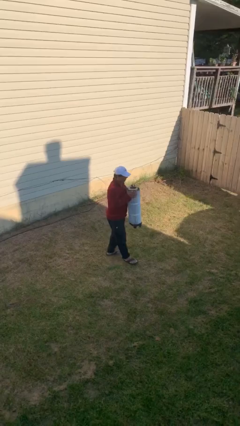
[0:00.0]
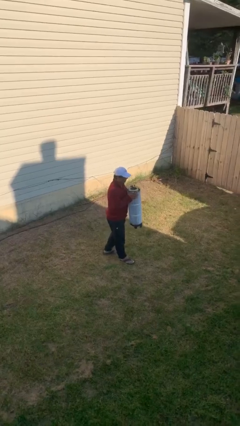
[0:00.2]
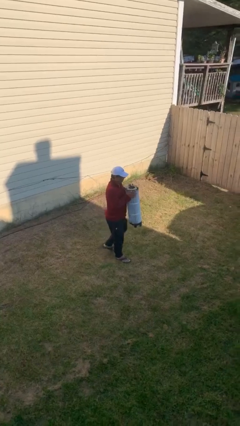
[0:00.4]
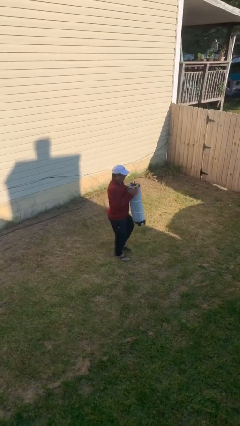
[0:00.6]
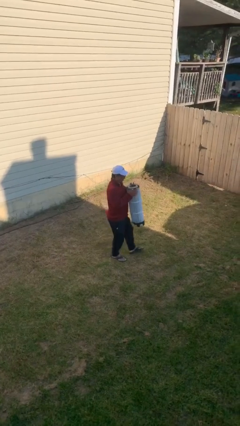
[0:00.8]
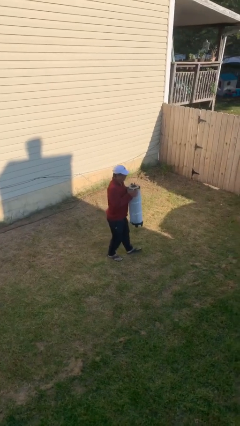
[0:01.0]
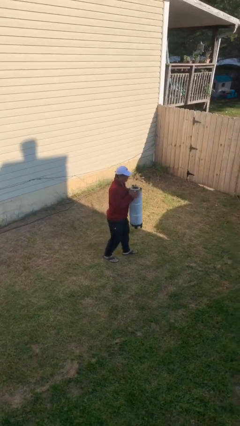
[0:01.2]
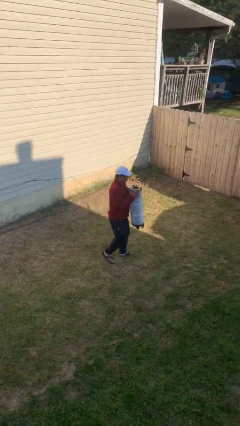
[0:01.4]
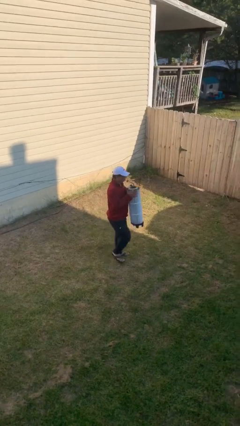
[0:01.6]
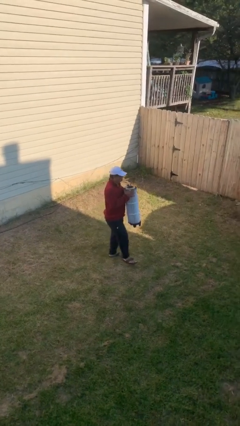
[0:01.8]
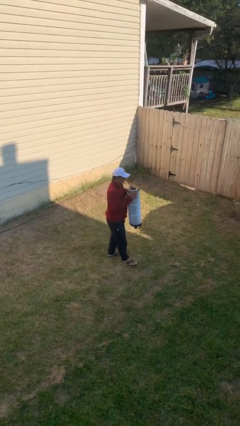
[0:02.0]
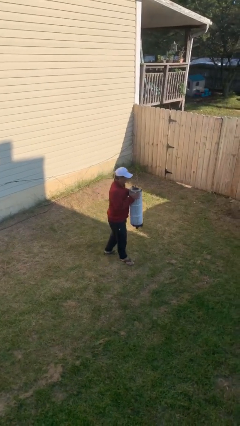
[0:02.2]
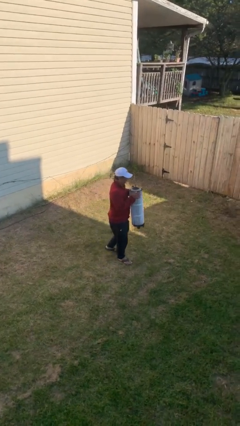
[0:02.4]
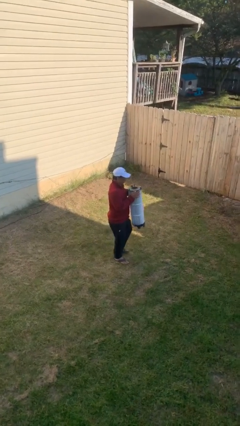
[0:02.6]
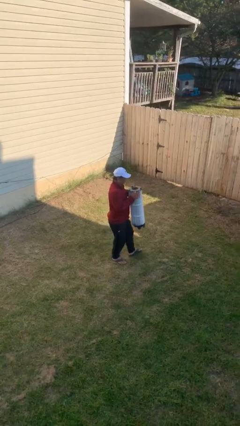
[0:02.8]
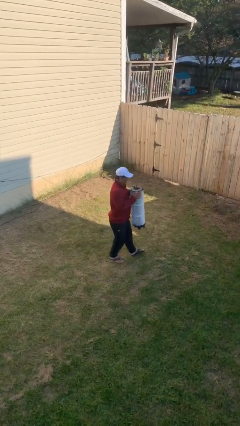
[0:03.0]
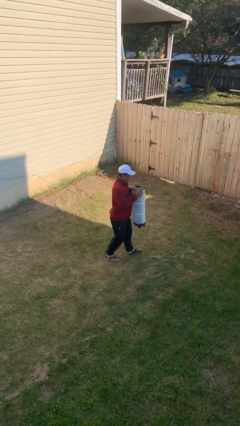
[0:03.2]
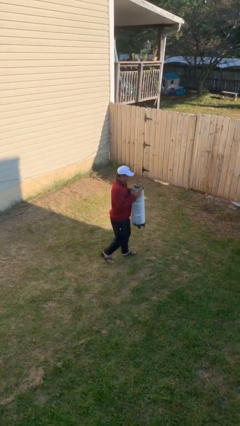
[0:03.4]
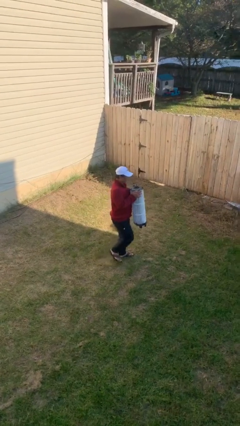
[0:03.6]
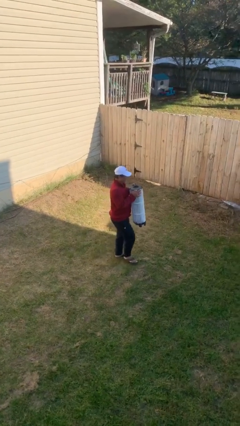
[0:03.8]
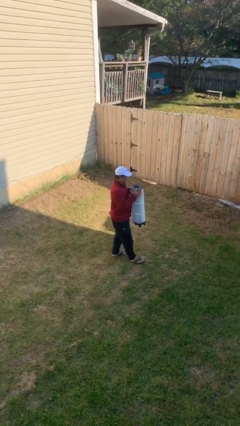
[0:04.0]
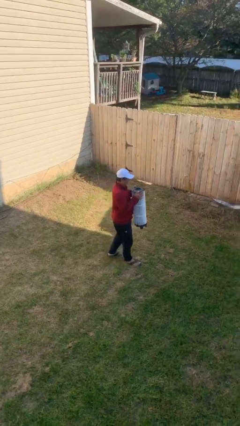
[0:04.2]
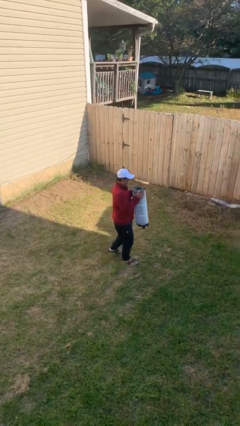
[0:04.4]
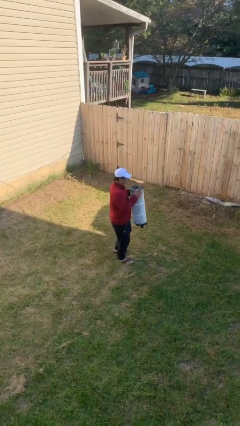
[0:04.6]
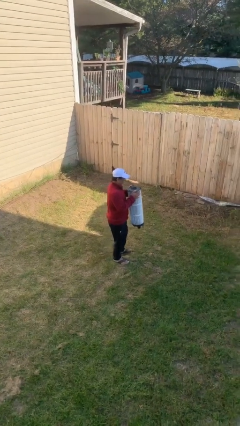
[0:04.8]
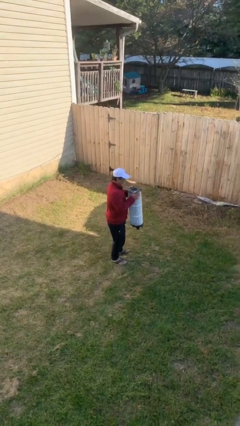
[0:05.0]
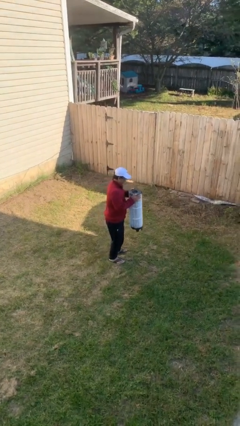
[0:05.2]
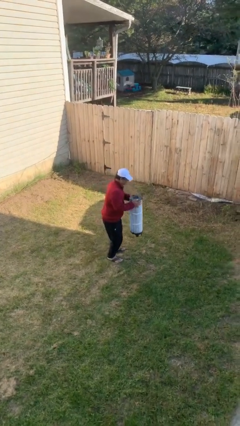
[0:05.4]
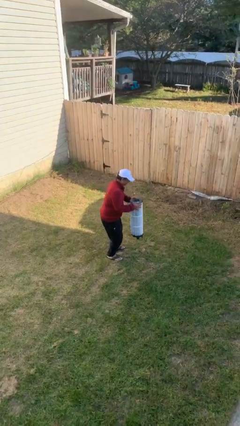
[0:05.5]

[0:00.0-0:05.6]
person carries heavy object

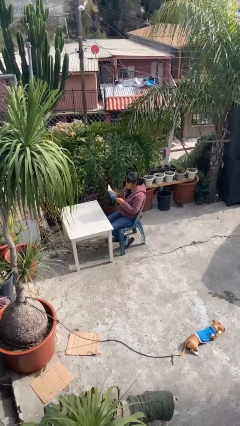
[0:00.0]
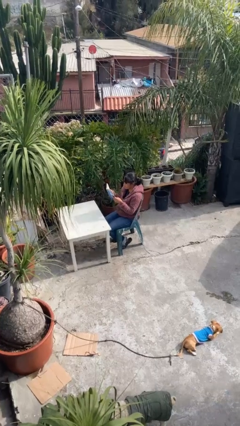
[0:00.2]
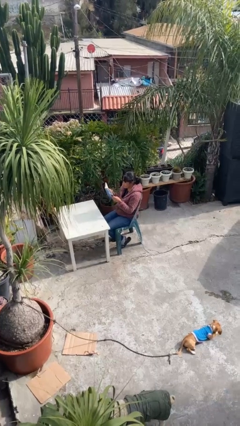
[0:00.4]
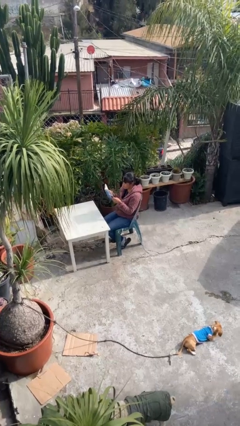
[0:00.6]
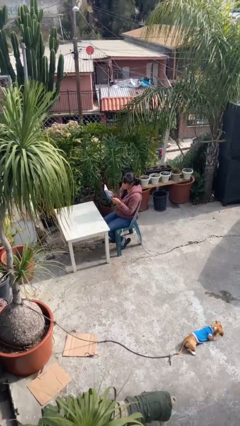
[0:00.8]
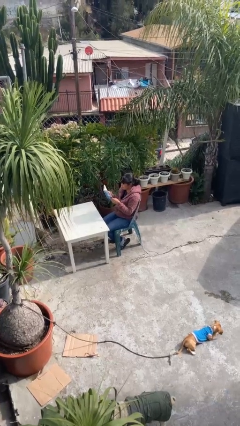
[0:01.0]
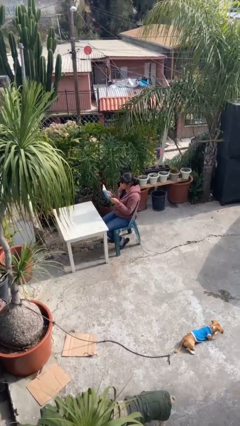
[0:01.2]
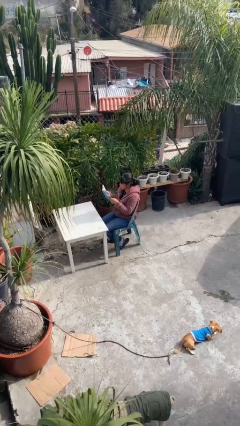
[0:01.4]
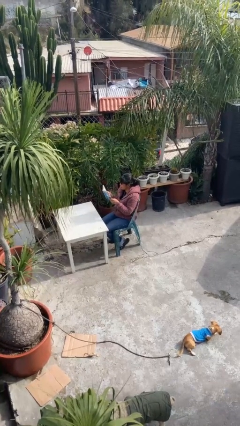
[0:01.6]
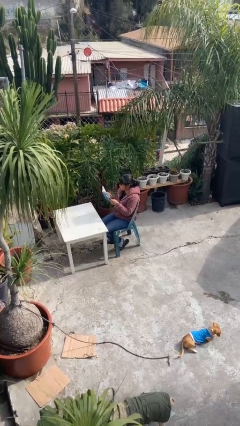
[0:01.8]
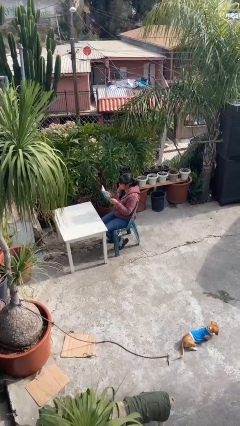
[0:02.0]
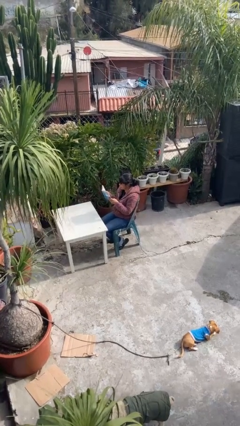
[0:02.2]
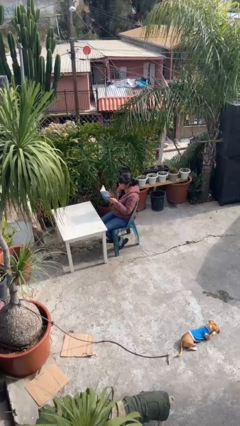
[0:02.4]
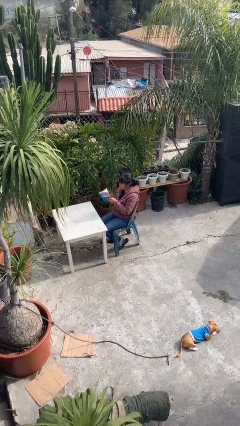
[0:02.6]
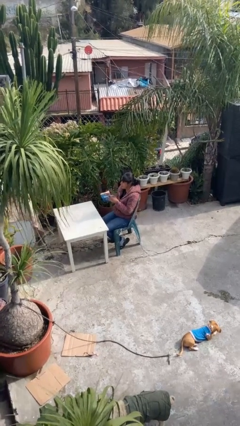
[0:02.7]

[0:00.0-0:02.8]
person reads document

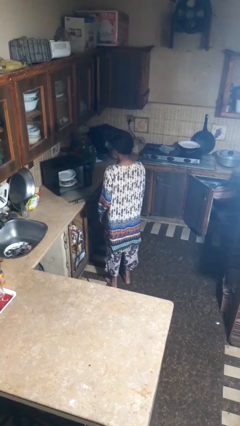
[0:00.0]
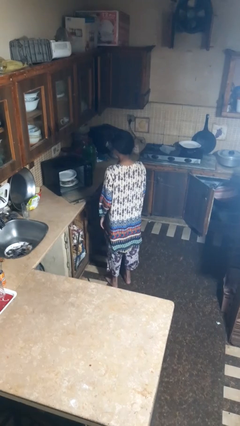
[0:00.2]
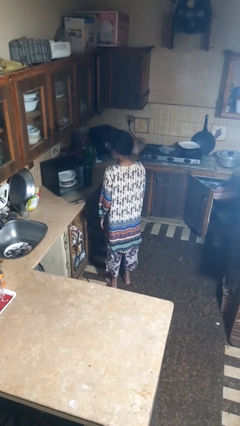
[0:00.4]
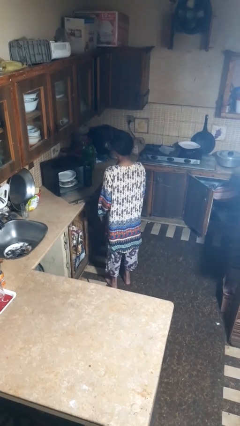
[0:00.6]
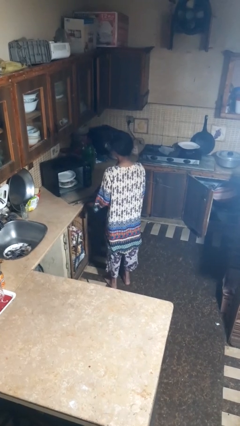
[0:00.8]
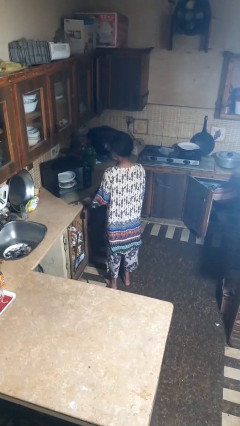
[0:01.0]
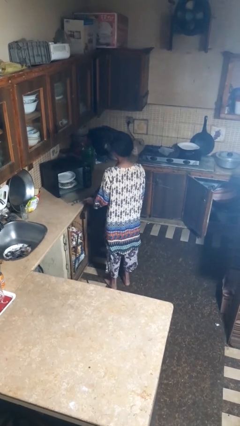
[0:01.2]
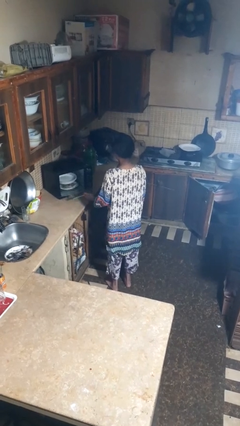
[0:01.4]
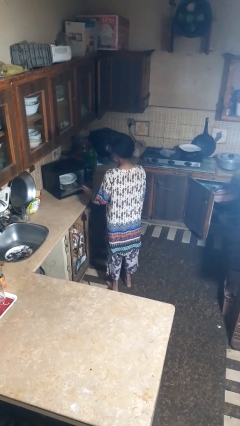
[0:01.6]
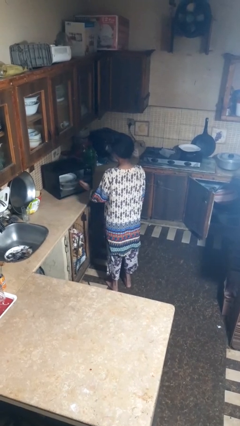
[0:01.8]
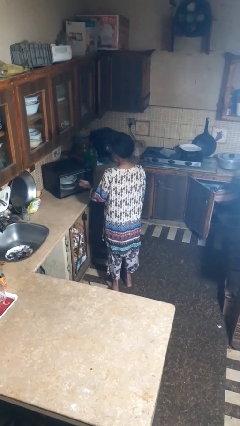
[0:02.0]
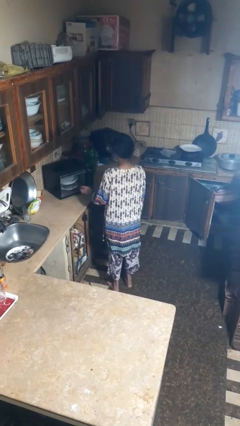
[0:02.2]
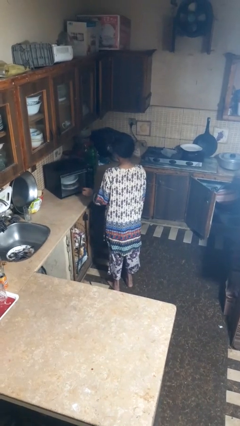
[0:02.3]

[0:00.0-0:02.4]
person closes dishwasher

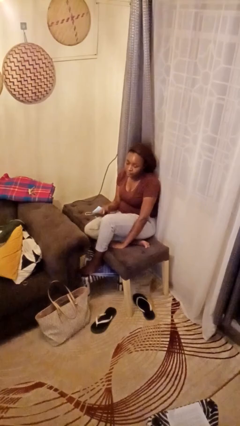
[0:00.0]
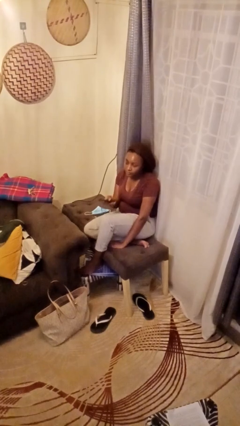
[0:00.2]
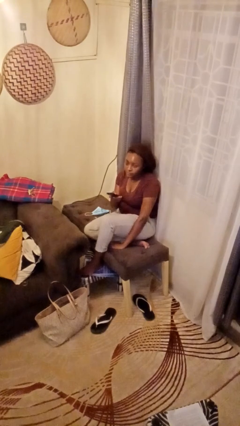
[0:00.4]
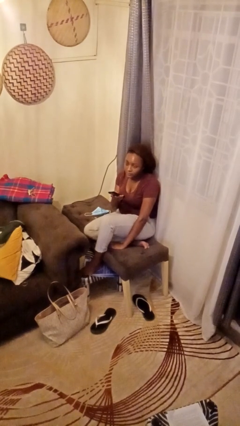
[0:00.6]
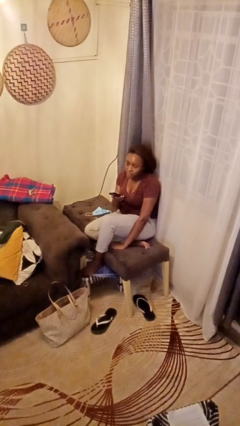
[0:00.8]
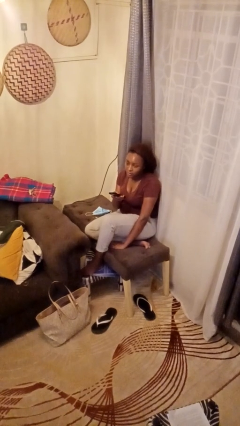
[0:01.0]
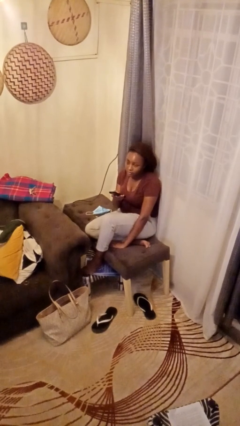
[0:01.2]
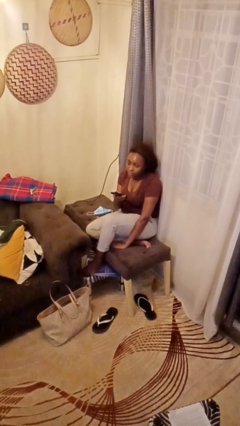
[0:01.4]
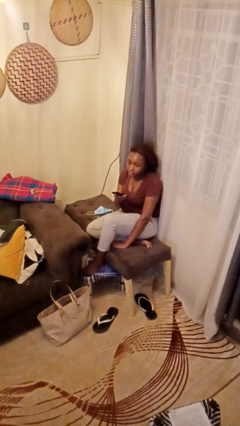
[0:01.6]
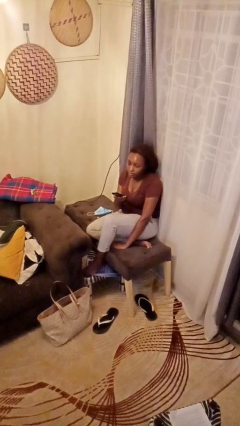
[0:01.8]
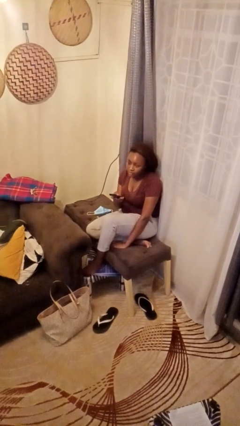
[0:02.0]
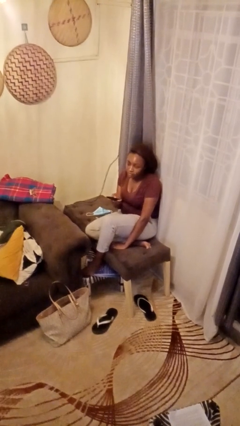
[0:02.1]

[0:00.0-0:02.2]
person uses television remote

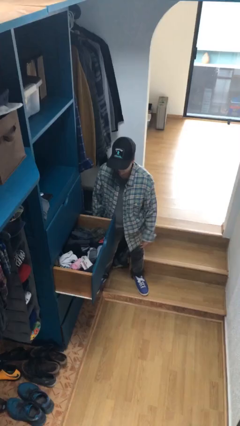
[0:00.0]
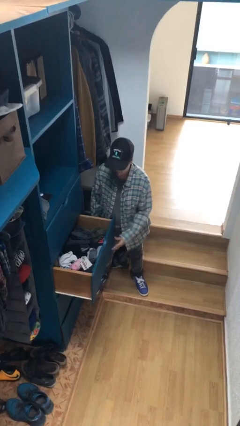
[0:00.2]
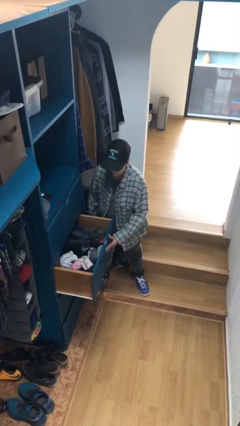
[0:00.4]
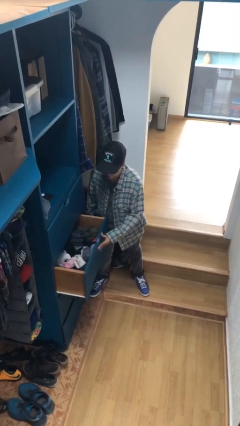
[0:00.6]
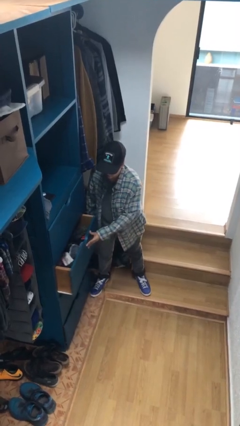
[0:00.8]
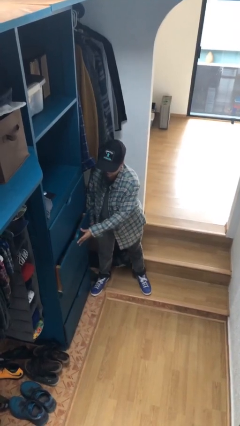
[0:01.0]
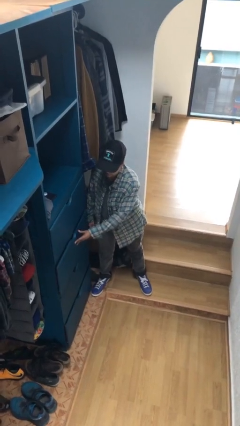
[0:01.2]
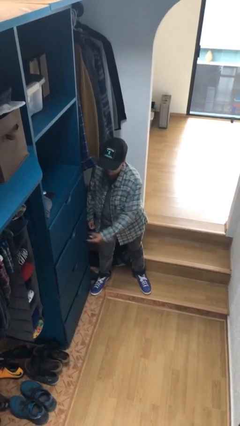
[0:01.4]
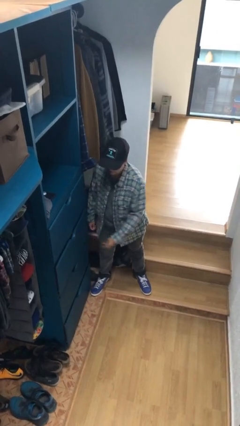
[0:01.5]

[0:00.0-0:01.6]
person closes dresser drawer

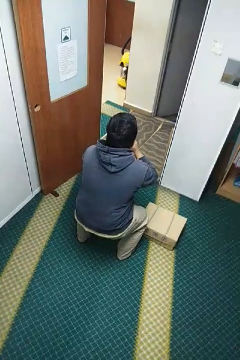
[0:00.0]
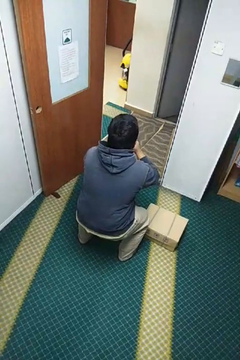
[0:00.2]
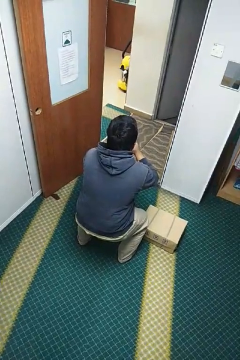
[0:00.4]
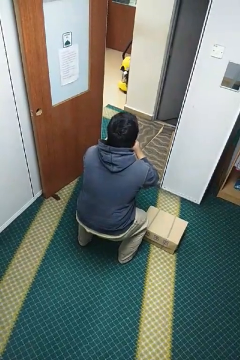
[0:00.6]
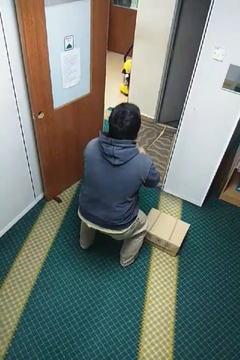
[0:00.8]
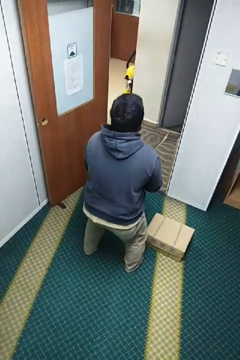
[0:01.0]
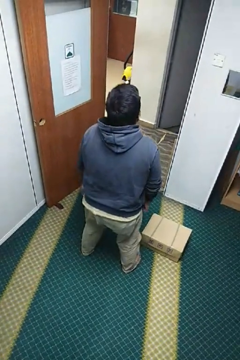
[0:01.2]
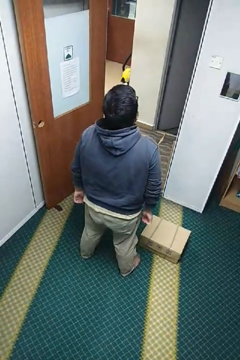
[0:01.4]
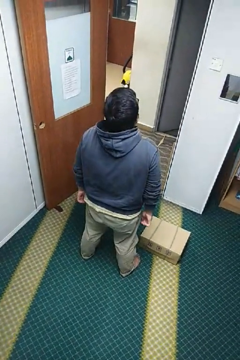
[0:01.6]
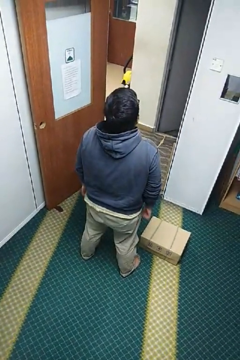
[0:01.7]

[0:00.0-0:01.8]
person stands up

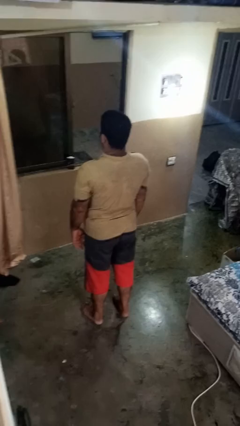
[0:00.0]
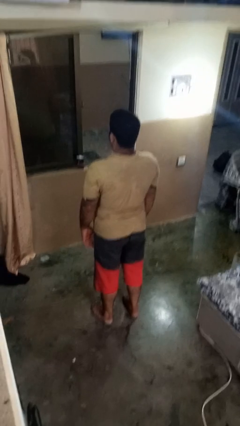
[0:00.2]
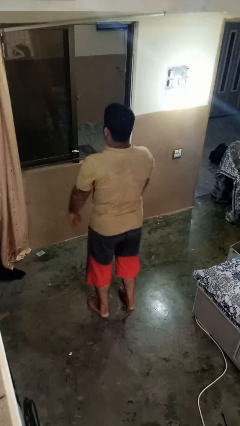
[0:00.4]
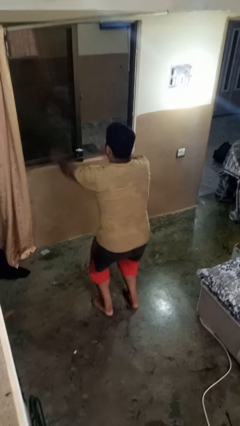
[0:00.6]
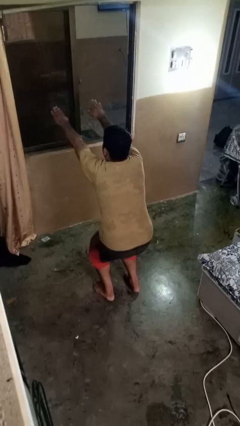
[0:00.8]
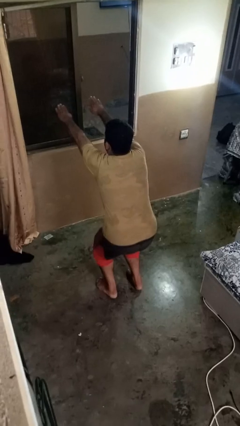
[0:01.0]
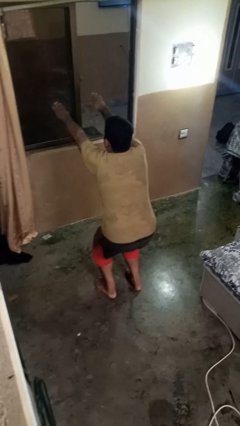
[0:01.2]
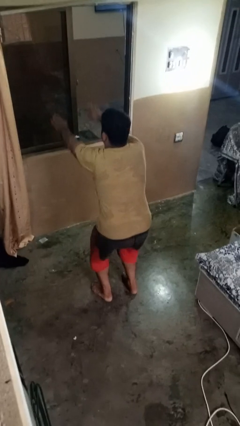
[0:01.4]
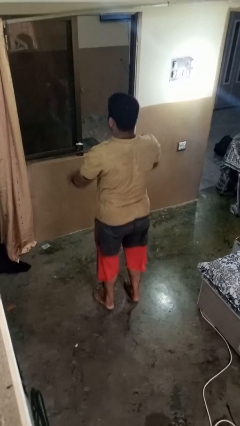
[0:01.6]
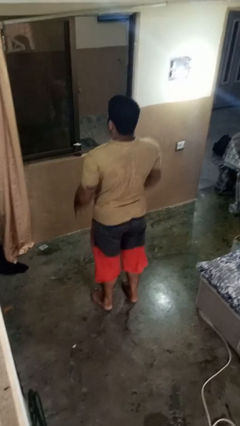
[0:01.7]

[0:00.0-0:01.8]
person squats
